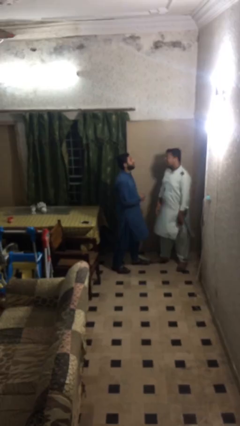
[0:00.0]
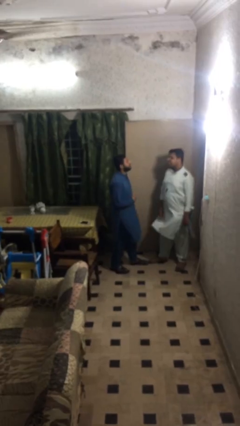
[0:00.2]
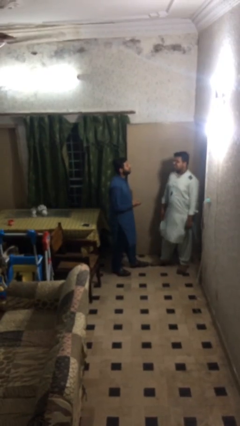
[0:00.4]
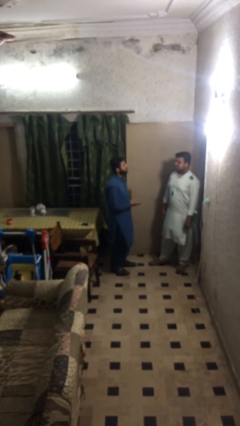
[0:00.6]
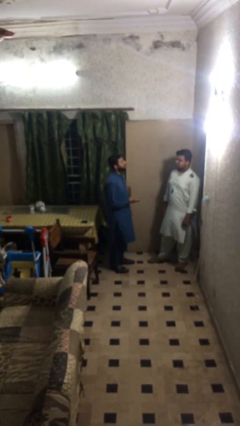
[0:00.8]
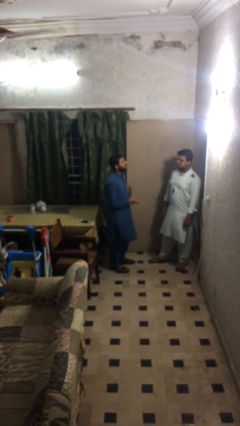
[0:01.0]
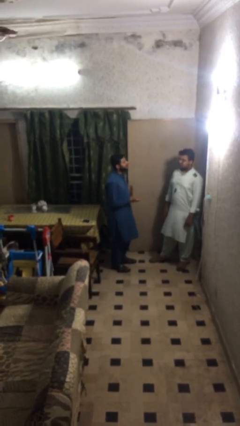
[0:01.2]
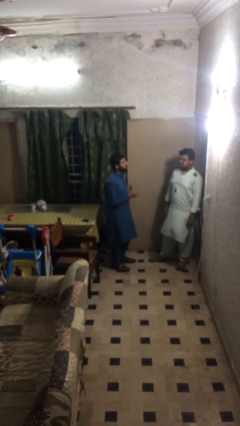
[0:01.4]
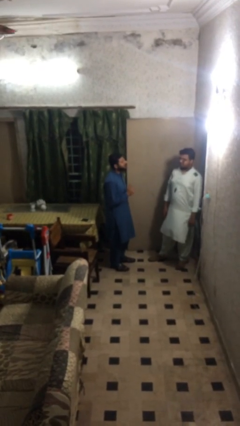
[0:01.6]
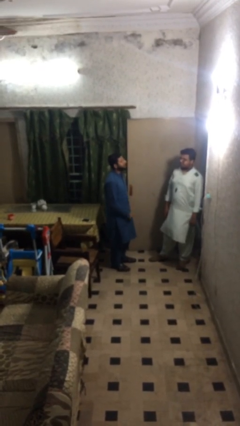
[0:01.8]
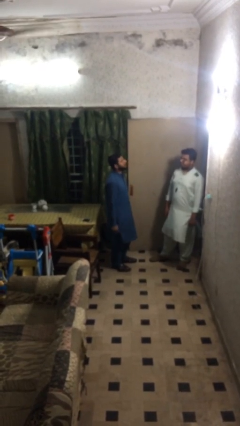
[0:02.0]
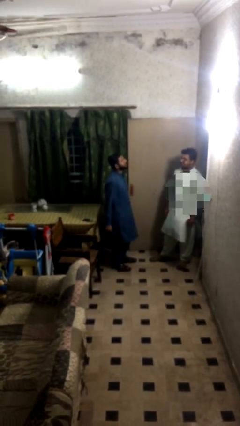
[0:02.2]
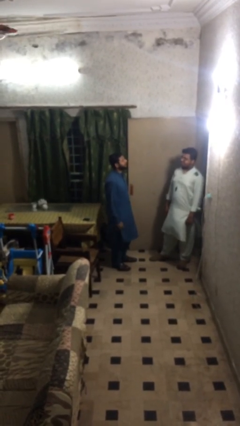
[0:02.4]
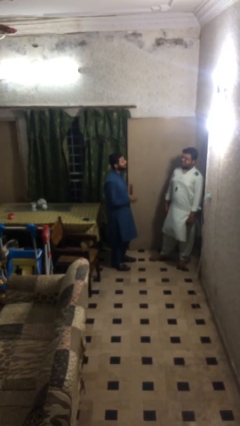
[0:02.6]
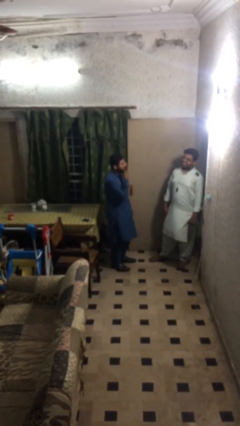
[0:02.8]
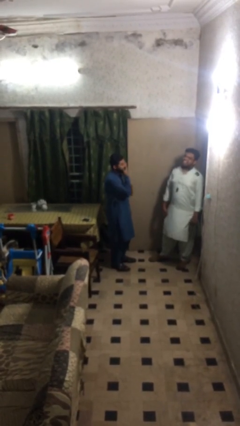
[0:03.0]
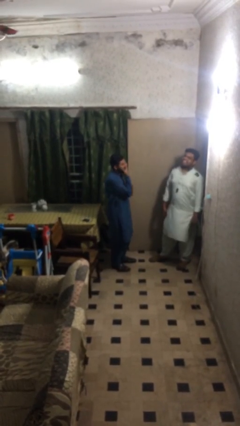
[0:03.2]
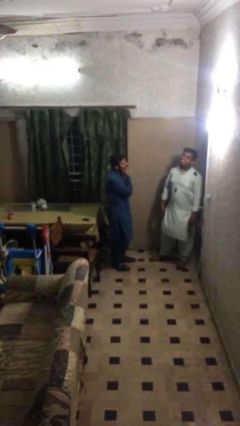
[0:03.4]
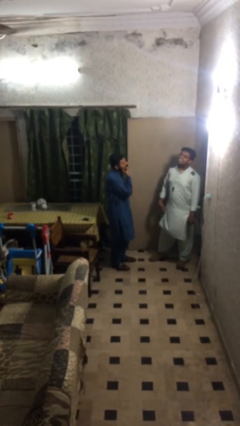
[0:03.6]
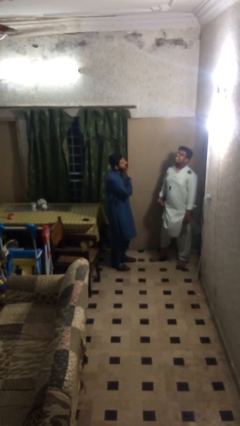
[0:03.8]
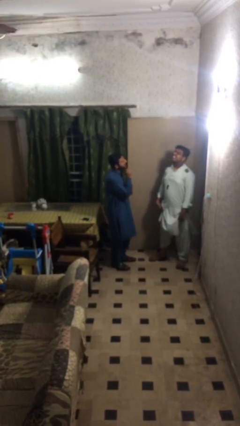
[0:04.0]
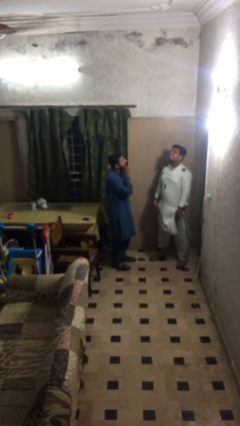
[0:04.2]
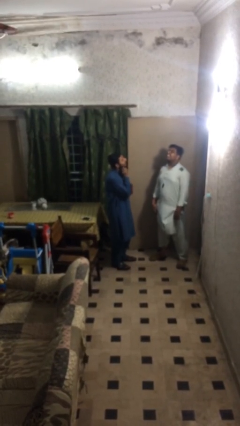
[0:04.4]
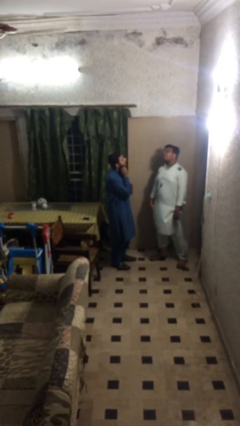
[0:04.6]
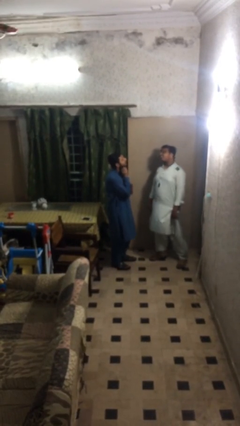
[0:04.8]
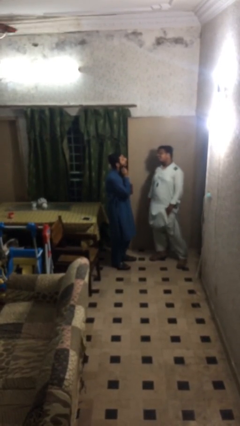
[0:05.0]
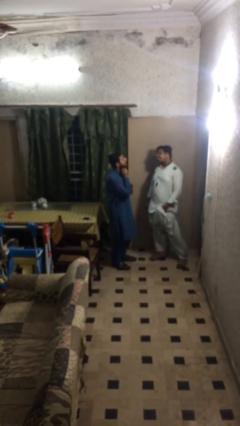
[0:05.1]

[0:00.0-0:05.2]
person talks to person

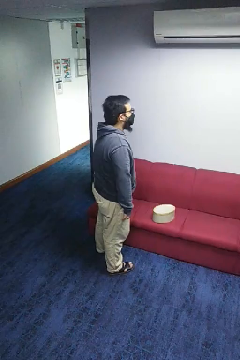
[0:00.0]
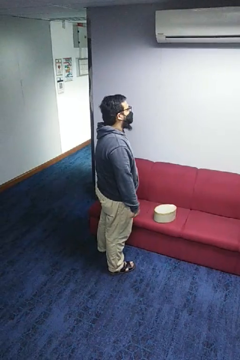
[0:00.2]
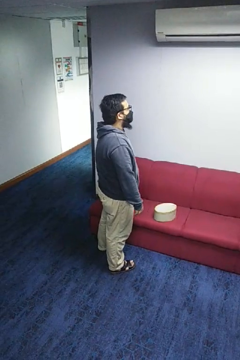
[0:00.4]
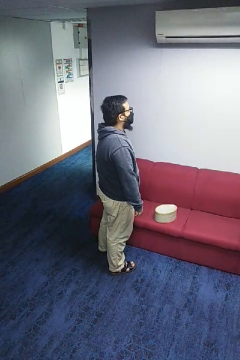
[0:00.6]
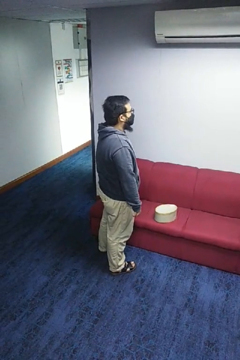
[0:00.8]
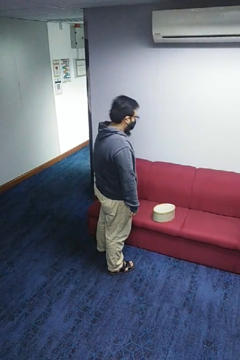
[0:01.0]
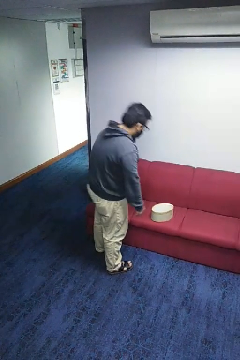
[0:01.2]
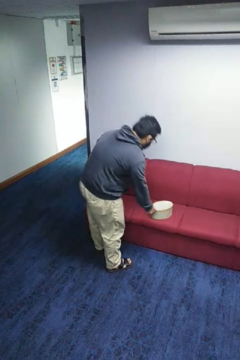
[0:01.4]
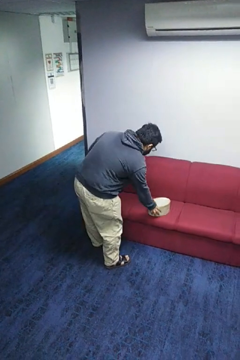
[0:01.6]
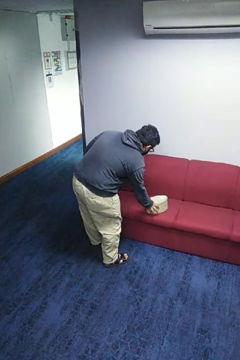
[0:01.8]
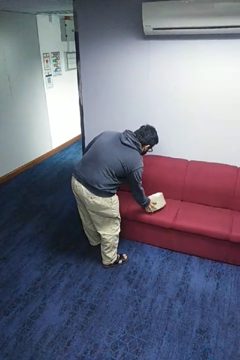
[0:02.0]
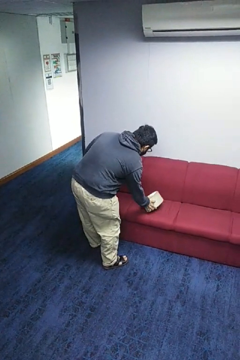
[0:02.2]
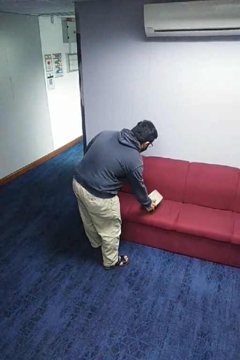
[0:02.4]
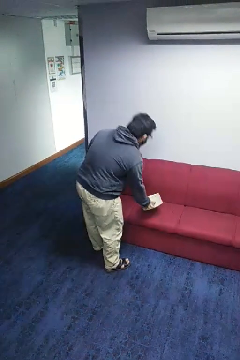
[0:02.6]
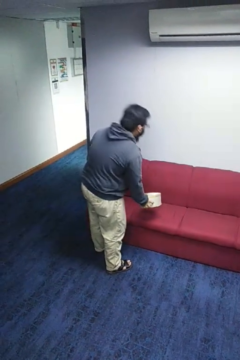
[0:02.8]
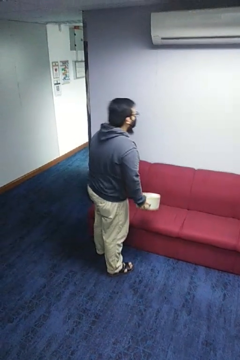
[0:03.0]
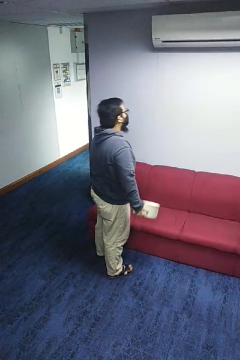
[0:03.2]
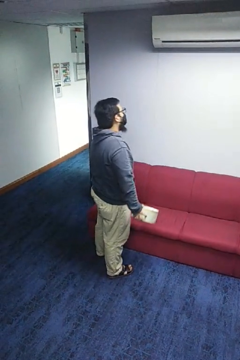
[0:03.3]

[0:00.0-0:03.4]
person picks up object from couch

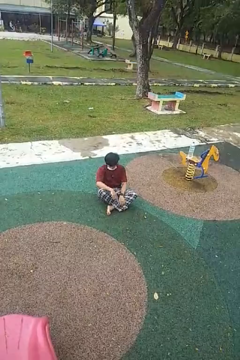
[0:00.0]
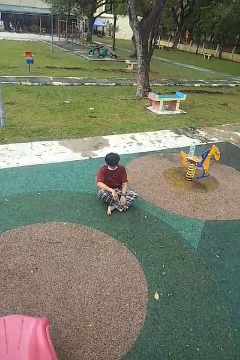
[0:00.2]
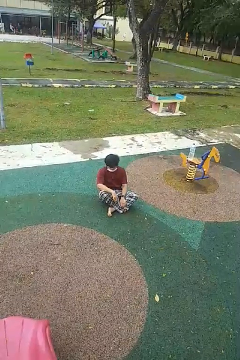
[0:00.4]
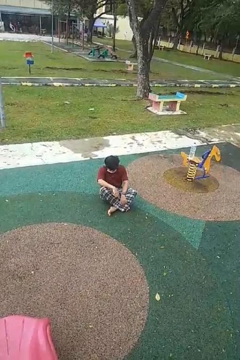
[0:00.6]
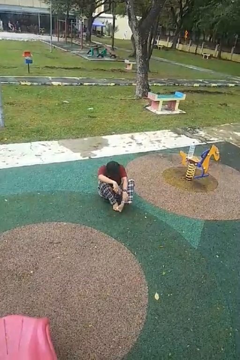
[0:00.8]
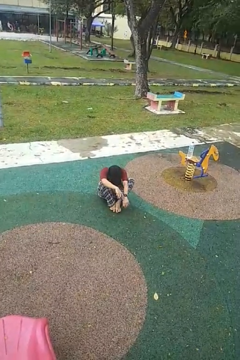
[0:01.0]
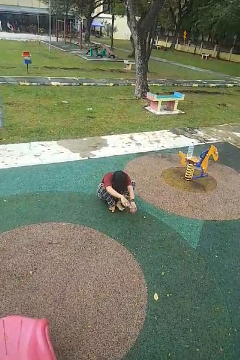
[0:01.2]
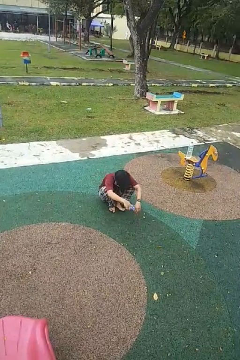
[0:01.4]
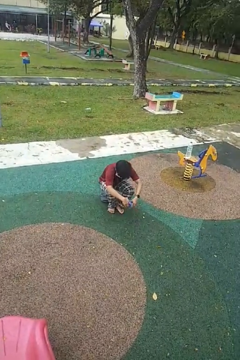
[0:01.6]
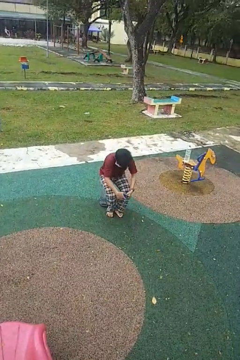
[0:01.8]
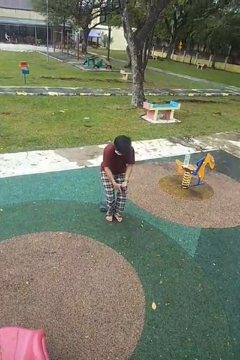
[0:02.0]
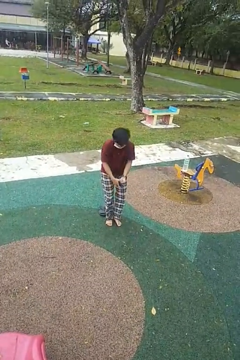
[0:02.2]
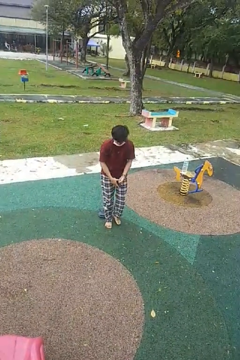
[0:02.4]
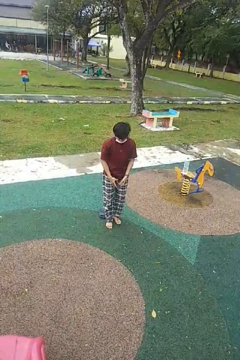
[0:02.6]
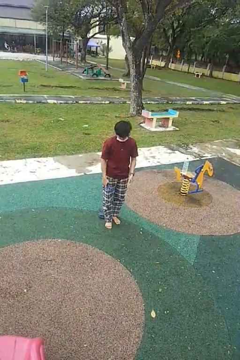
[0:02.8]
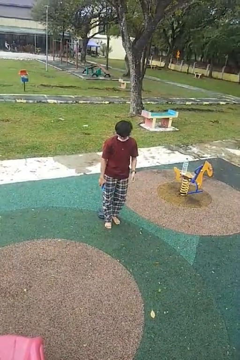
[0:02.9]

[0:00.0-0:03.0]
person stands up from floor

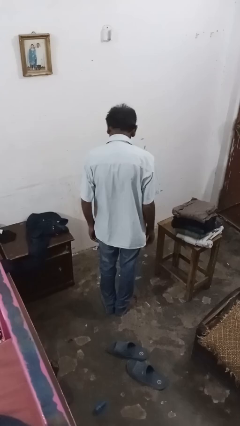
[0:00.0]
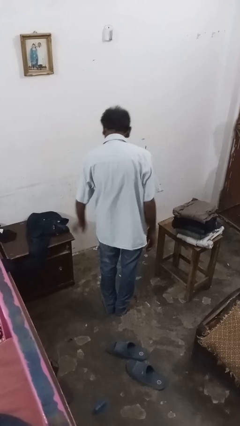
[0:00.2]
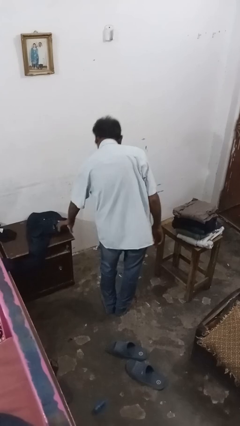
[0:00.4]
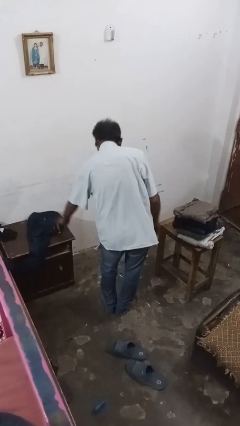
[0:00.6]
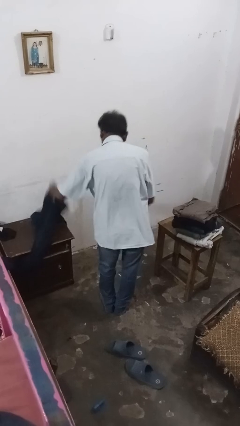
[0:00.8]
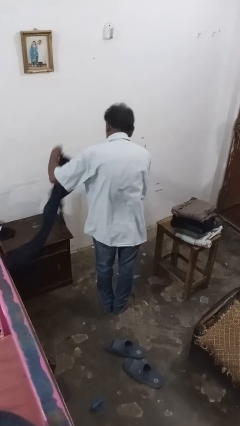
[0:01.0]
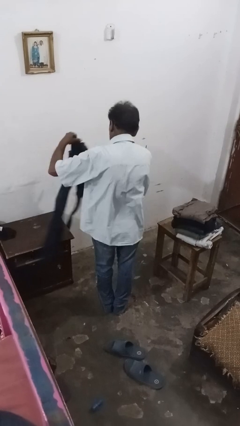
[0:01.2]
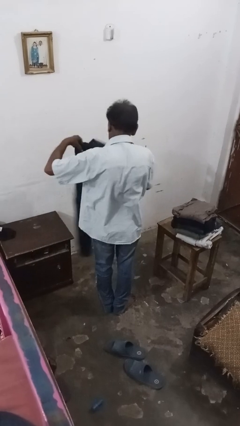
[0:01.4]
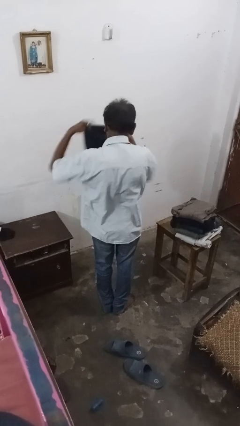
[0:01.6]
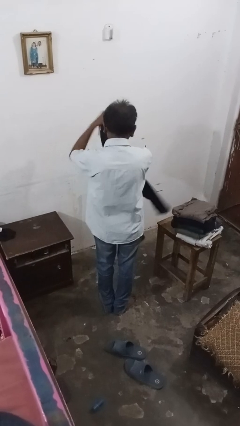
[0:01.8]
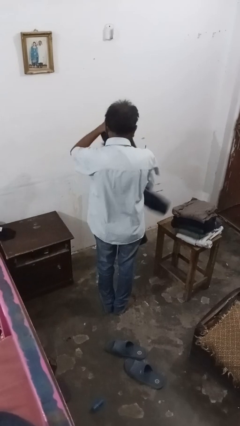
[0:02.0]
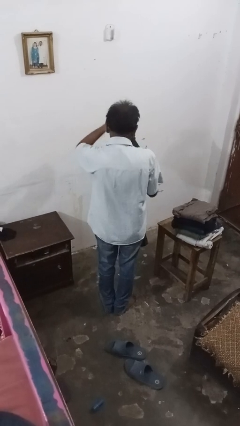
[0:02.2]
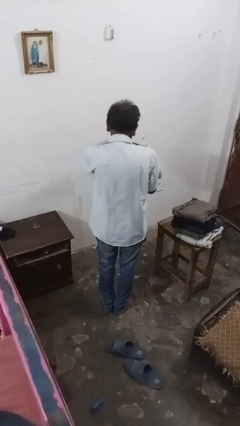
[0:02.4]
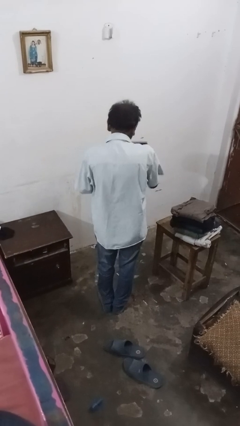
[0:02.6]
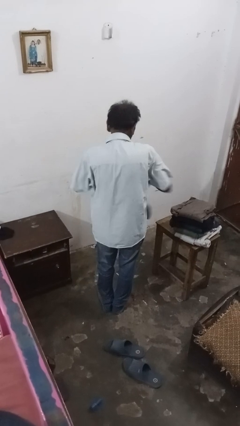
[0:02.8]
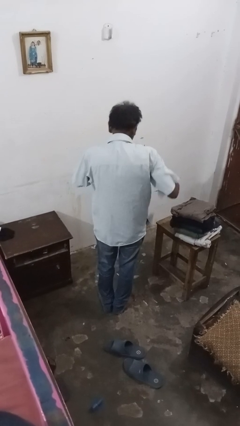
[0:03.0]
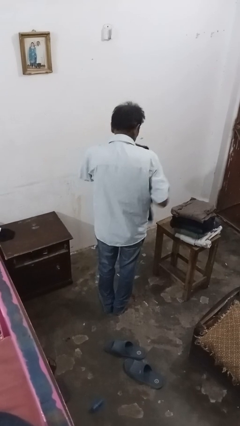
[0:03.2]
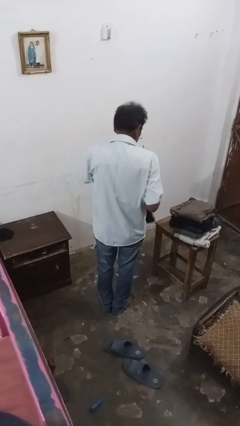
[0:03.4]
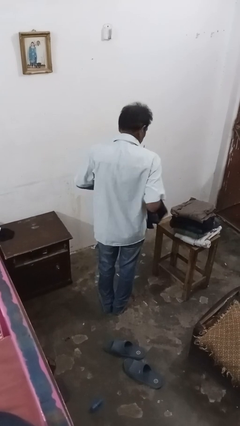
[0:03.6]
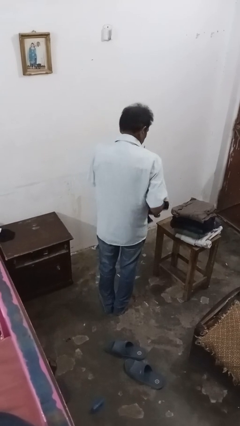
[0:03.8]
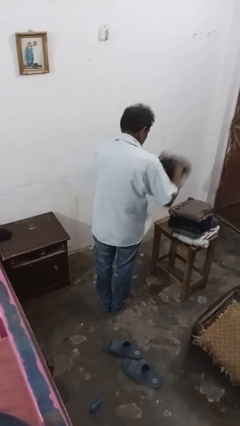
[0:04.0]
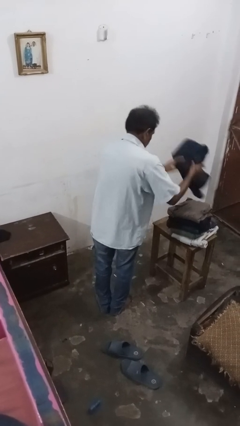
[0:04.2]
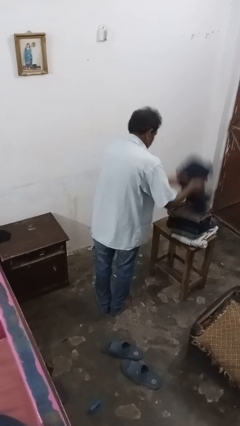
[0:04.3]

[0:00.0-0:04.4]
person folds pants

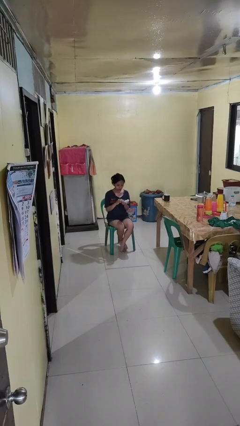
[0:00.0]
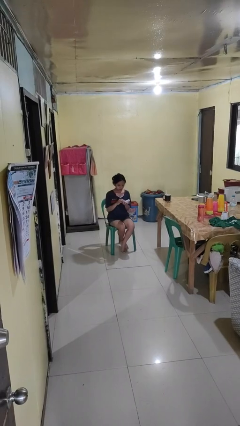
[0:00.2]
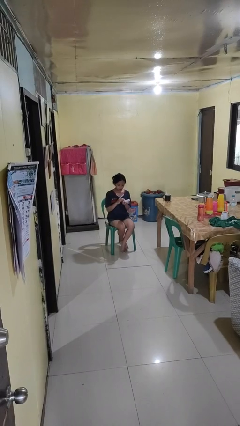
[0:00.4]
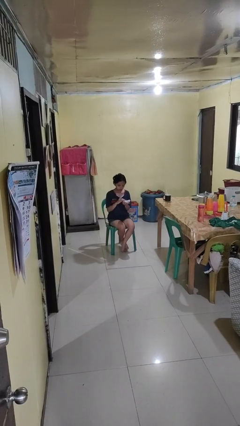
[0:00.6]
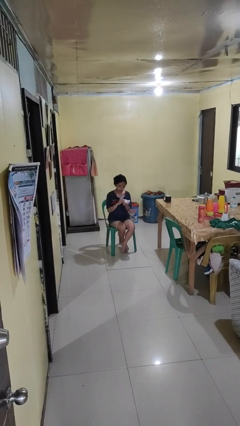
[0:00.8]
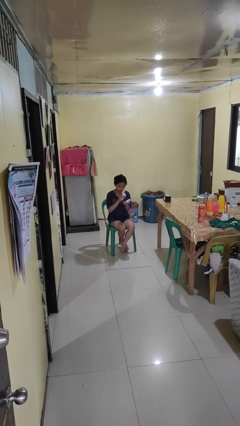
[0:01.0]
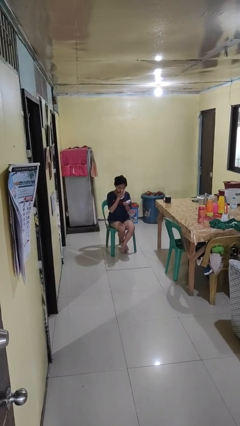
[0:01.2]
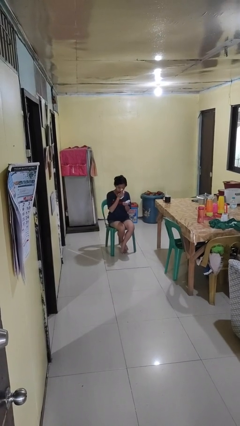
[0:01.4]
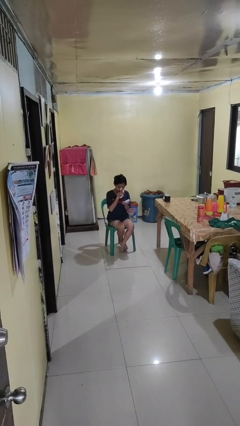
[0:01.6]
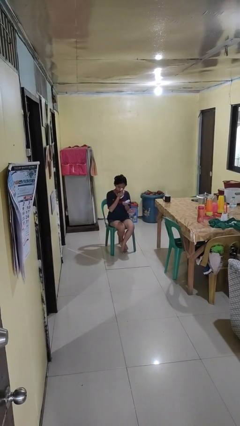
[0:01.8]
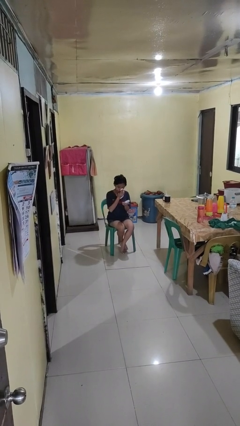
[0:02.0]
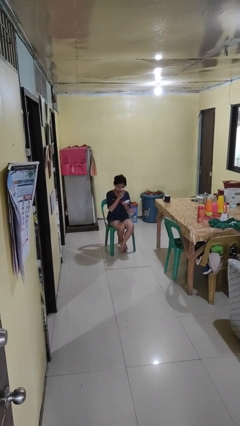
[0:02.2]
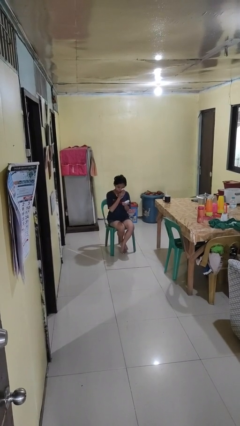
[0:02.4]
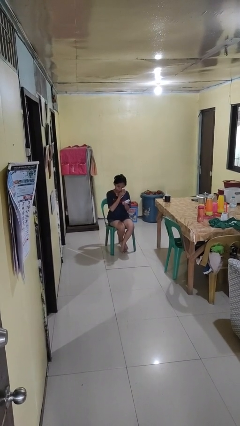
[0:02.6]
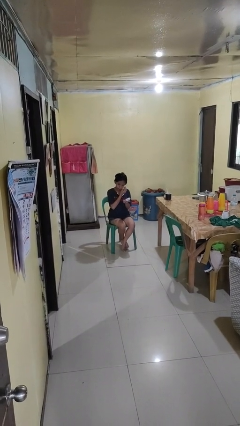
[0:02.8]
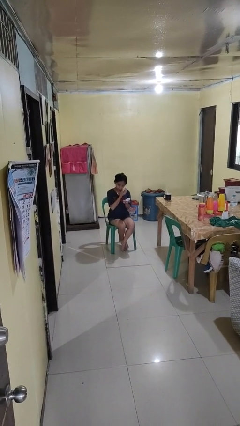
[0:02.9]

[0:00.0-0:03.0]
person applies foundation makeup

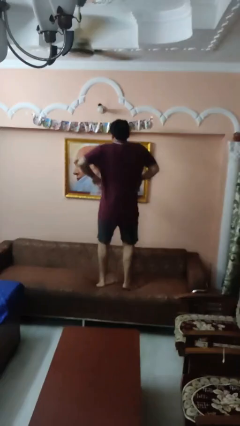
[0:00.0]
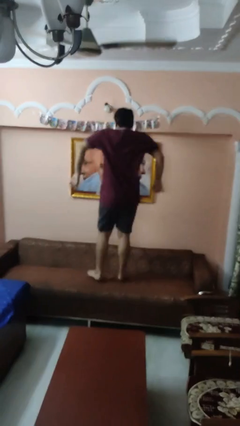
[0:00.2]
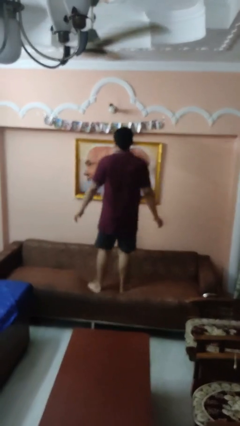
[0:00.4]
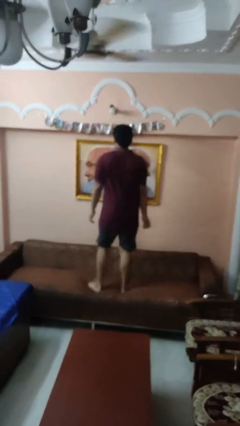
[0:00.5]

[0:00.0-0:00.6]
person jumps on couch
